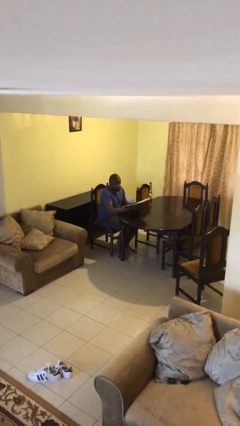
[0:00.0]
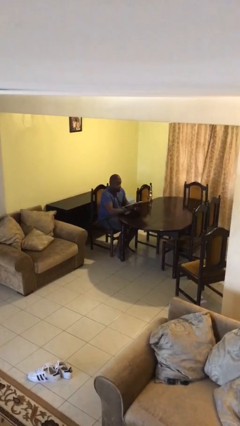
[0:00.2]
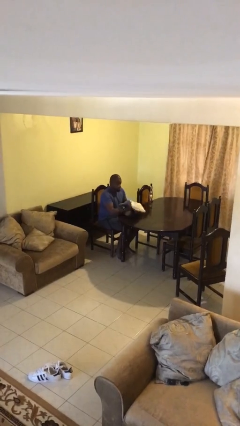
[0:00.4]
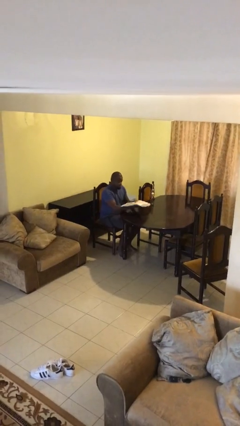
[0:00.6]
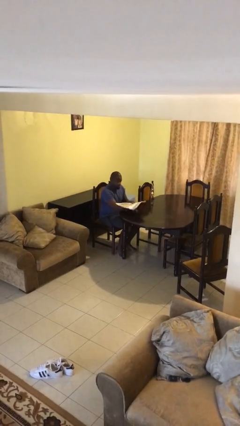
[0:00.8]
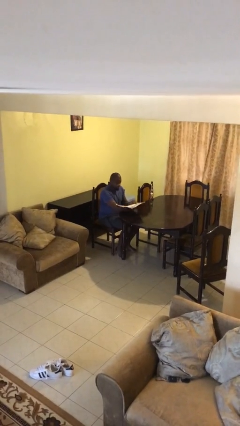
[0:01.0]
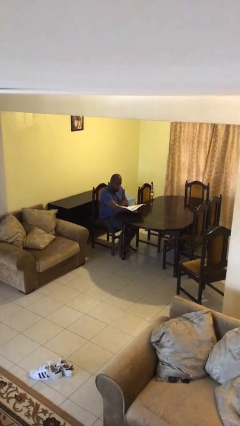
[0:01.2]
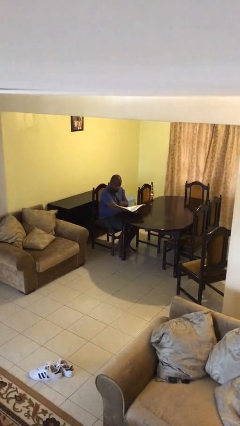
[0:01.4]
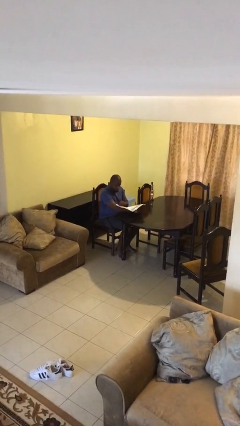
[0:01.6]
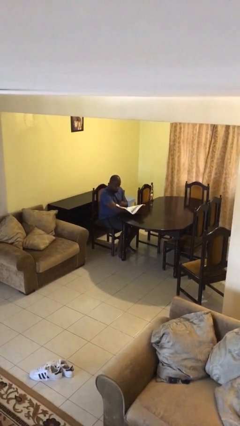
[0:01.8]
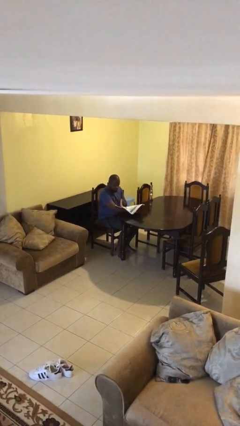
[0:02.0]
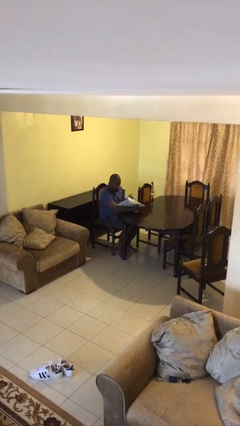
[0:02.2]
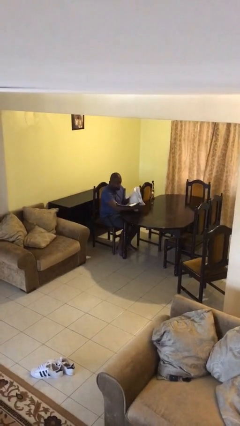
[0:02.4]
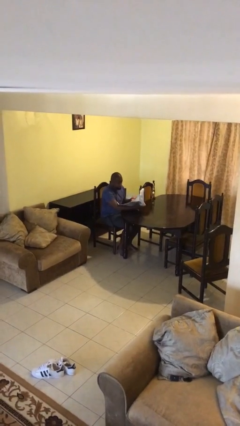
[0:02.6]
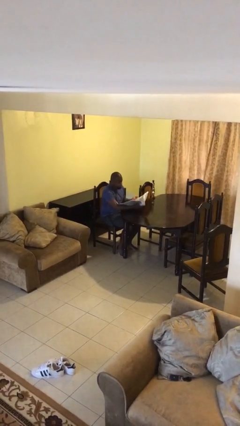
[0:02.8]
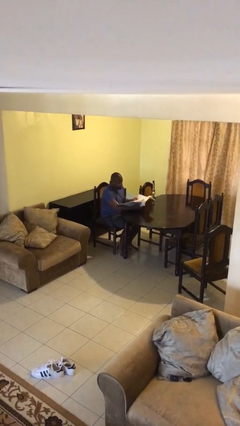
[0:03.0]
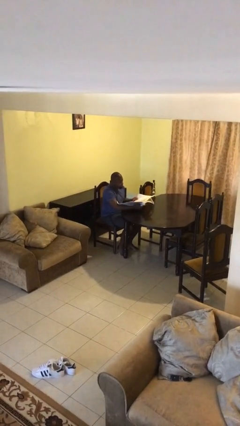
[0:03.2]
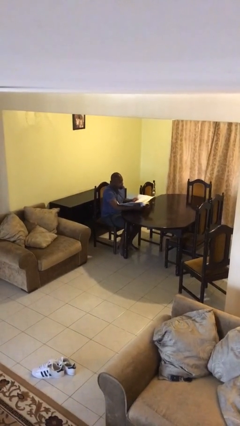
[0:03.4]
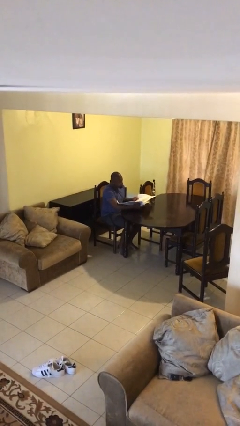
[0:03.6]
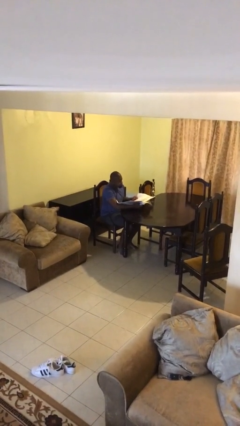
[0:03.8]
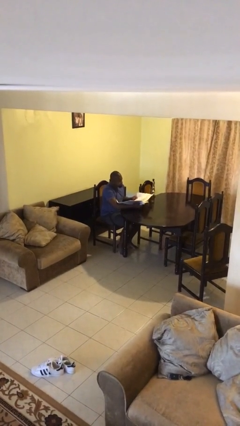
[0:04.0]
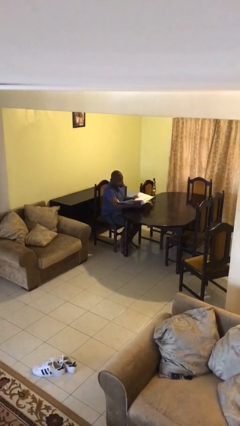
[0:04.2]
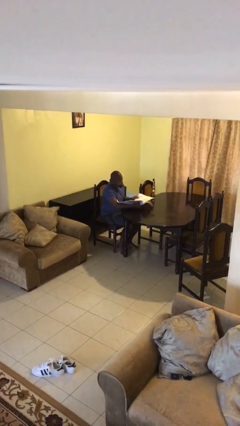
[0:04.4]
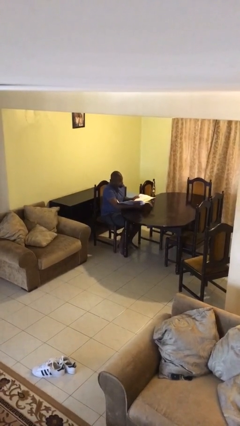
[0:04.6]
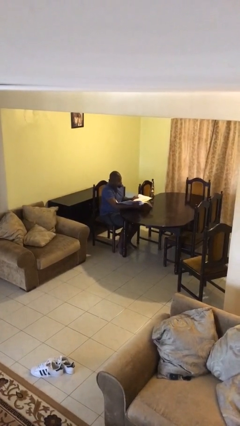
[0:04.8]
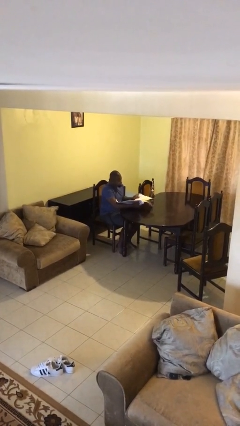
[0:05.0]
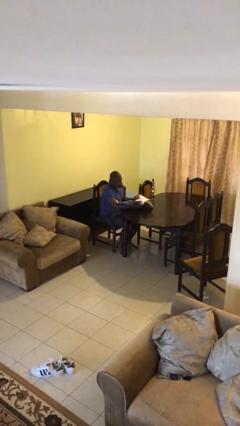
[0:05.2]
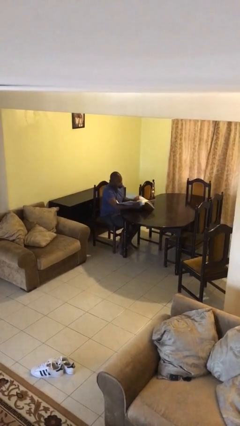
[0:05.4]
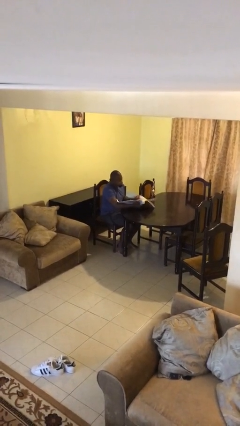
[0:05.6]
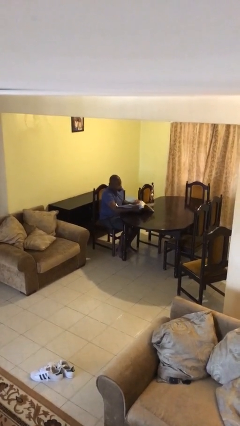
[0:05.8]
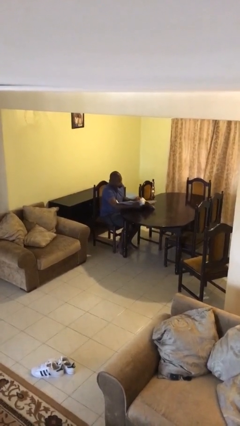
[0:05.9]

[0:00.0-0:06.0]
person reads document

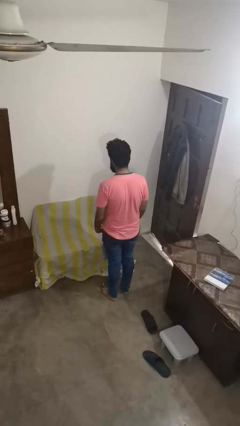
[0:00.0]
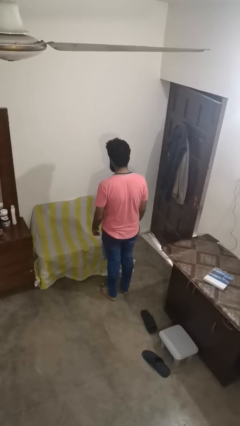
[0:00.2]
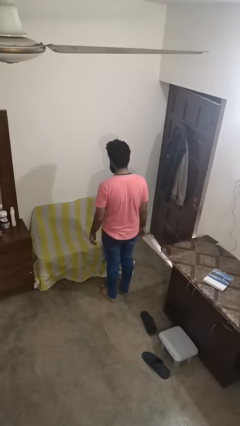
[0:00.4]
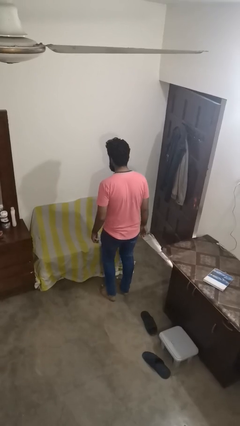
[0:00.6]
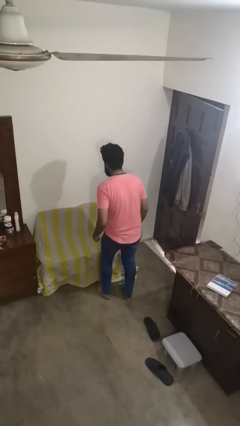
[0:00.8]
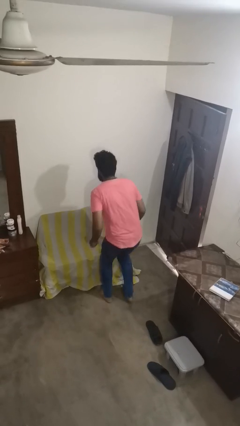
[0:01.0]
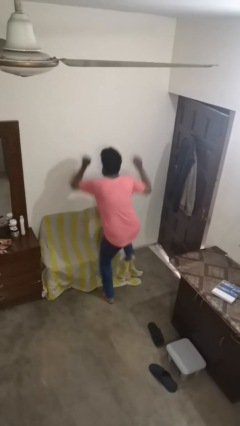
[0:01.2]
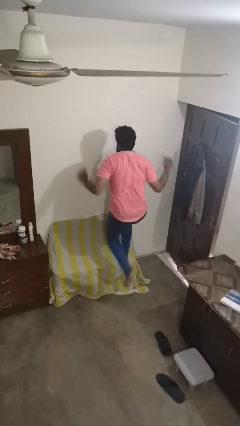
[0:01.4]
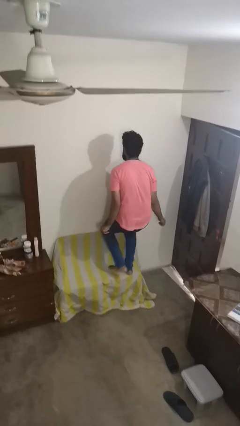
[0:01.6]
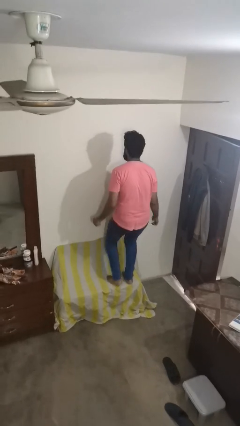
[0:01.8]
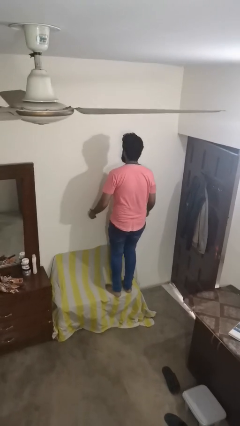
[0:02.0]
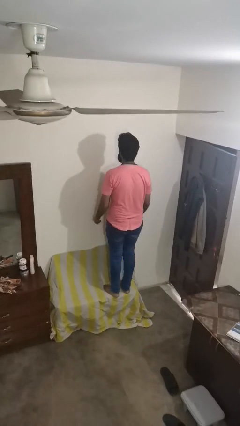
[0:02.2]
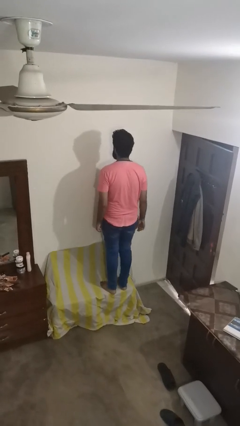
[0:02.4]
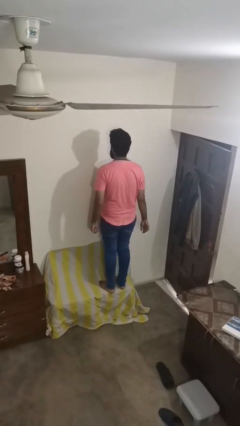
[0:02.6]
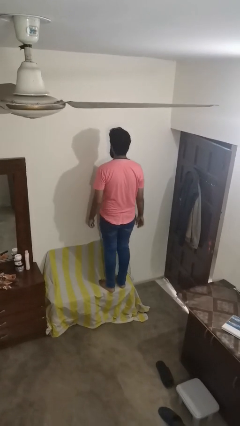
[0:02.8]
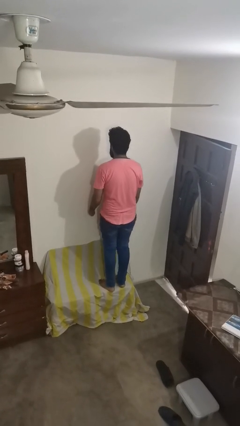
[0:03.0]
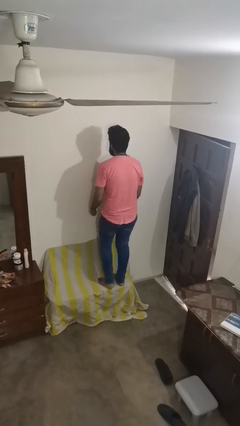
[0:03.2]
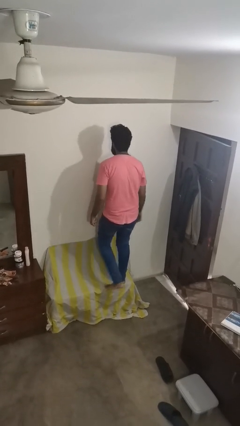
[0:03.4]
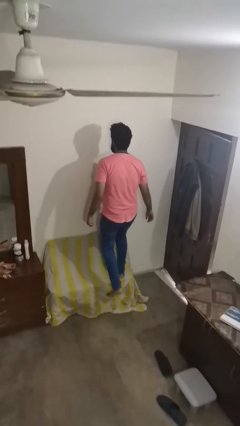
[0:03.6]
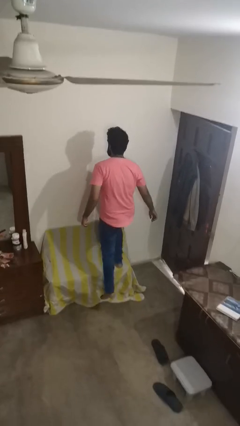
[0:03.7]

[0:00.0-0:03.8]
person jumps on couch

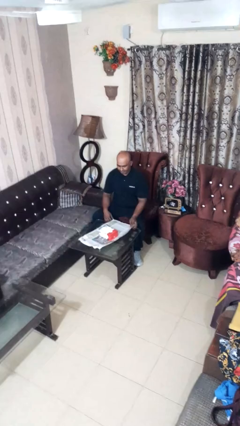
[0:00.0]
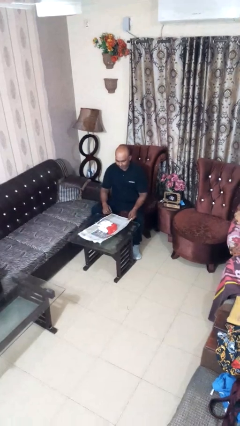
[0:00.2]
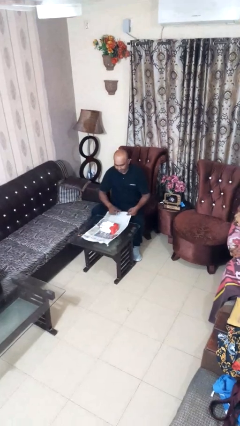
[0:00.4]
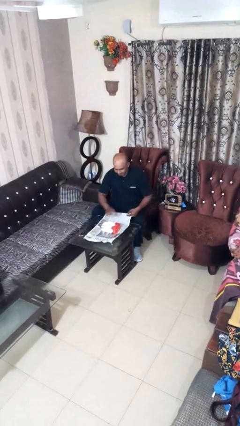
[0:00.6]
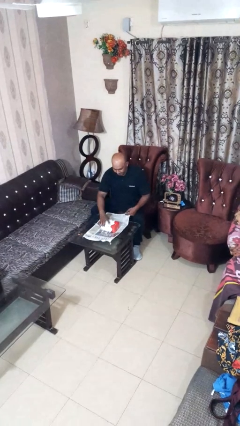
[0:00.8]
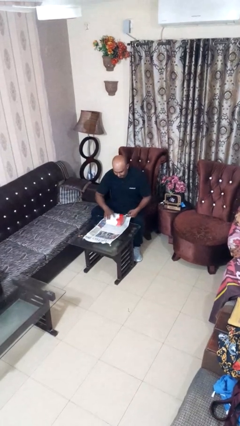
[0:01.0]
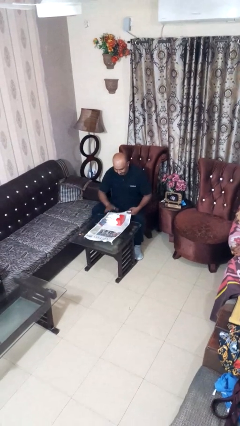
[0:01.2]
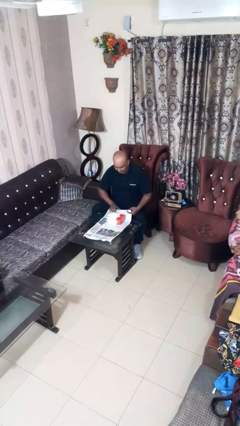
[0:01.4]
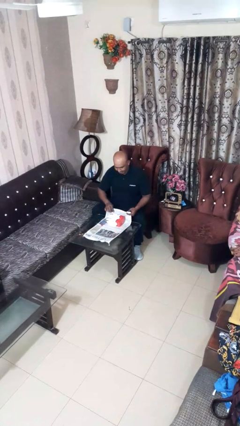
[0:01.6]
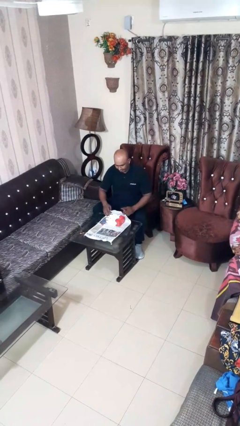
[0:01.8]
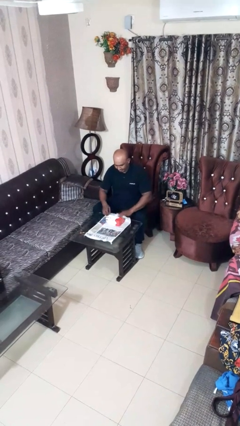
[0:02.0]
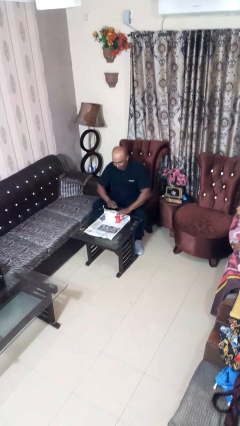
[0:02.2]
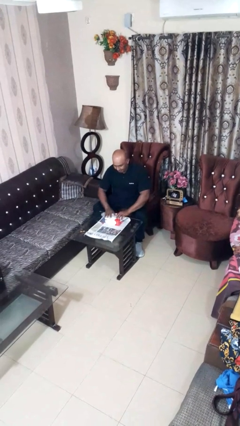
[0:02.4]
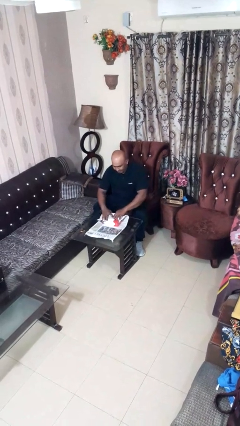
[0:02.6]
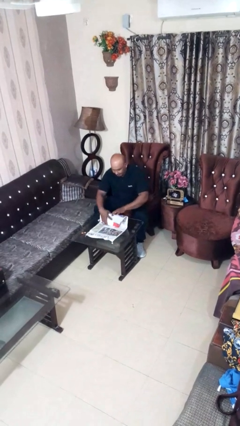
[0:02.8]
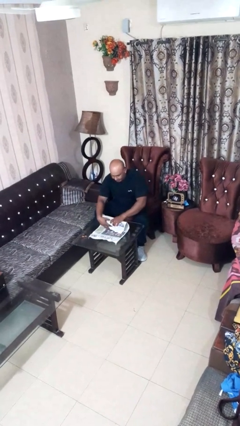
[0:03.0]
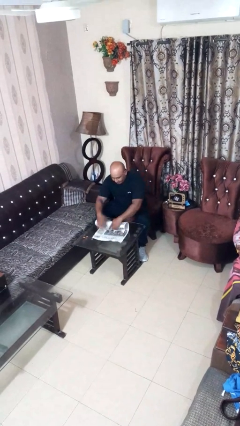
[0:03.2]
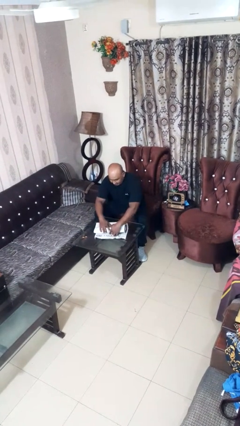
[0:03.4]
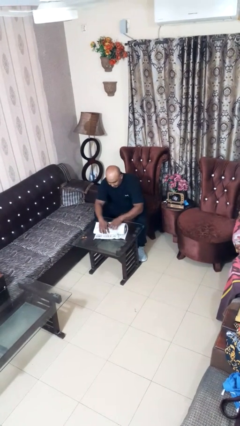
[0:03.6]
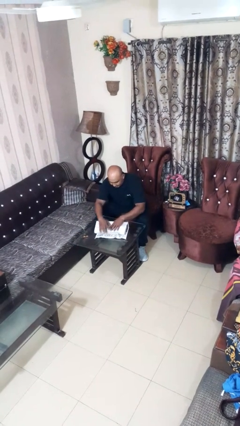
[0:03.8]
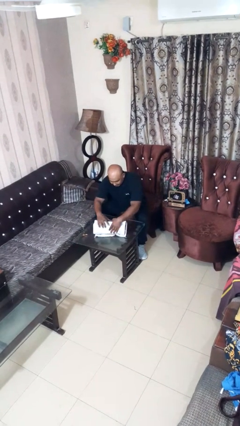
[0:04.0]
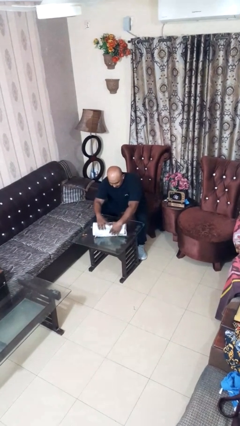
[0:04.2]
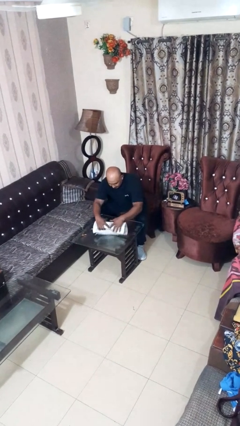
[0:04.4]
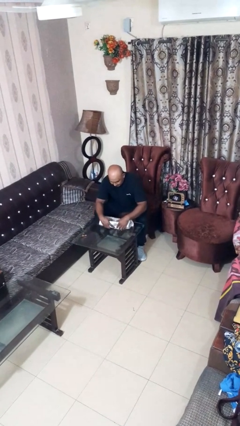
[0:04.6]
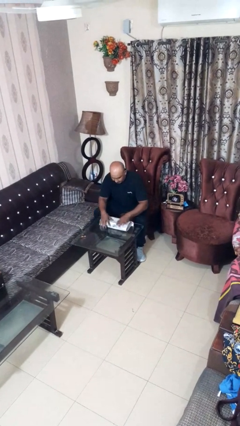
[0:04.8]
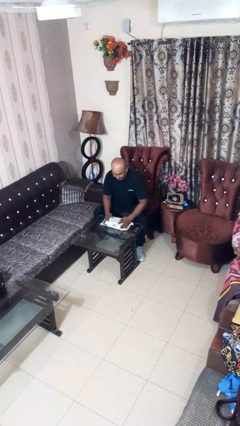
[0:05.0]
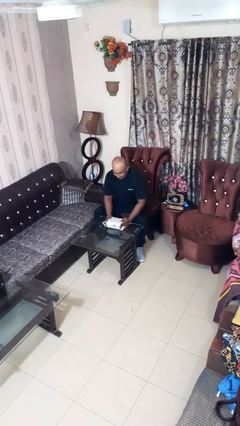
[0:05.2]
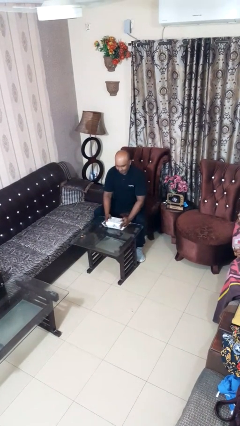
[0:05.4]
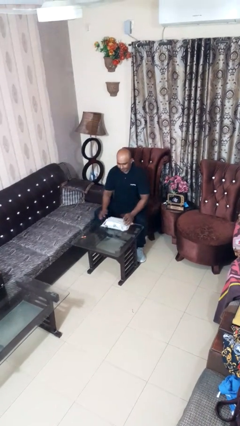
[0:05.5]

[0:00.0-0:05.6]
person wraps box

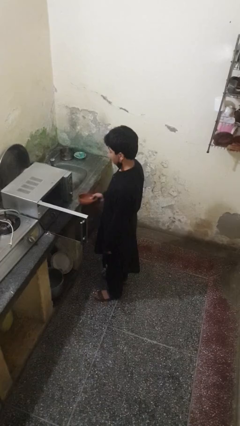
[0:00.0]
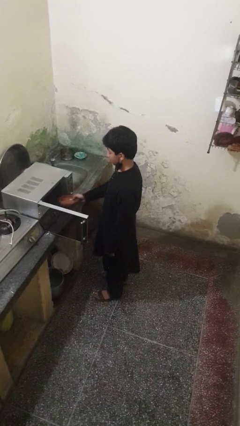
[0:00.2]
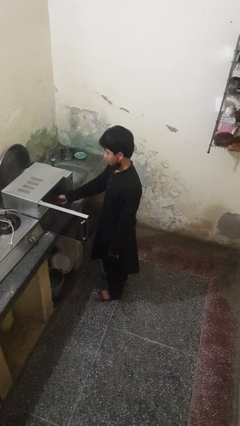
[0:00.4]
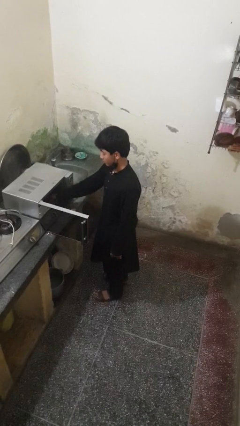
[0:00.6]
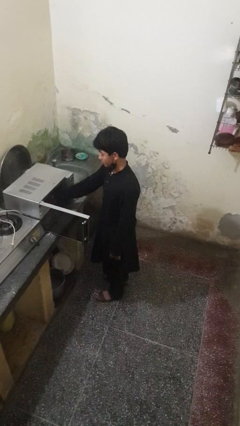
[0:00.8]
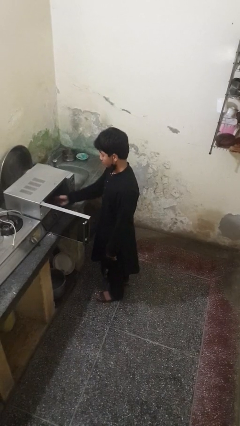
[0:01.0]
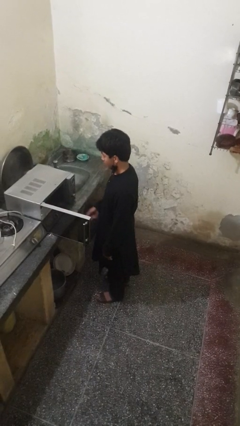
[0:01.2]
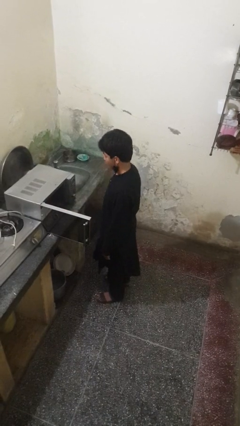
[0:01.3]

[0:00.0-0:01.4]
person puts object into microwave

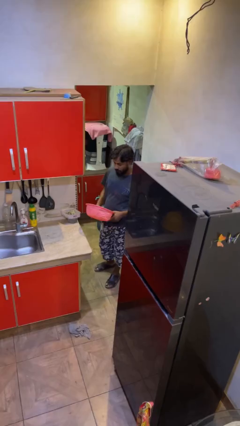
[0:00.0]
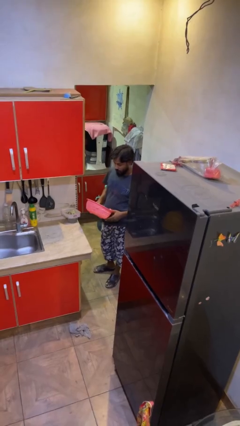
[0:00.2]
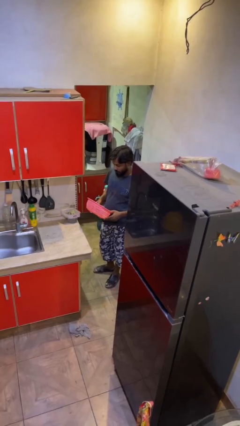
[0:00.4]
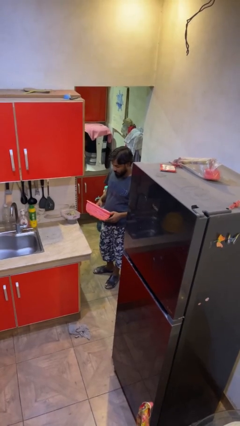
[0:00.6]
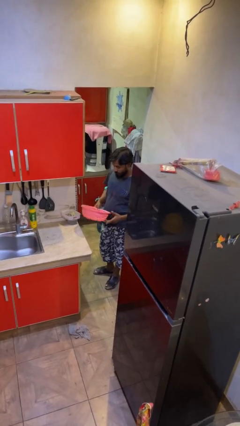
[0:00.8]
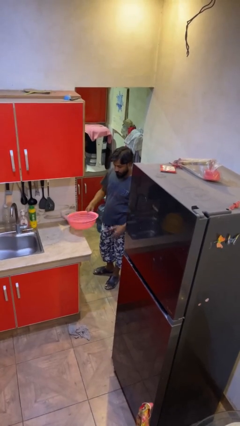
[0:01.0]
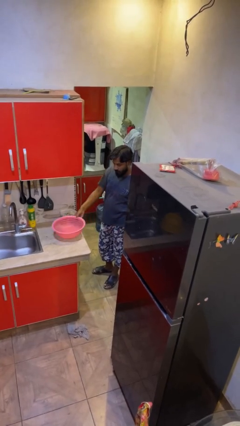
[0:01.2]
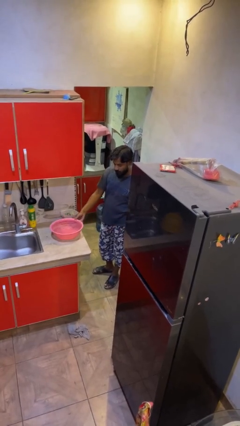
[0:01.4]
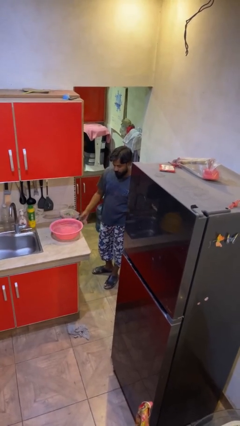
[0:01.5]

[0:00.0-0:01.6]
person puts down object on countertop
